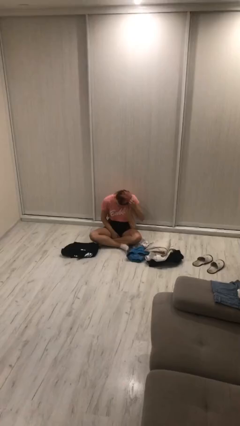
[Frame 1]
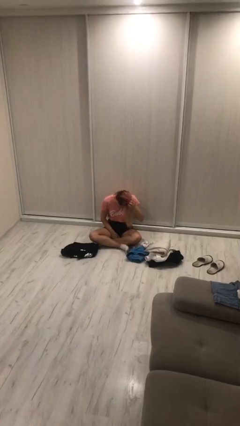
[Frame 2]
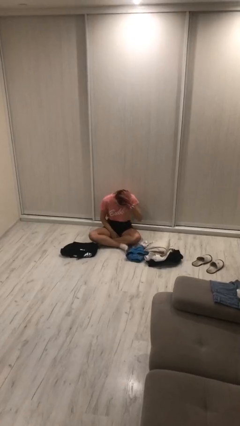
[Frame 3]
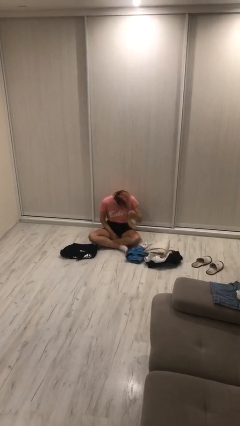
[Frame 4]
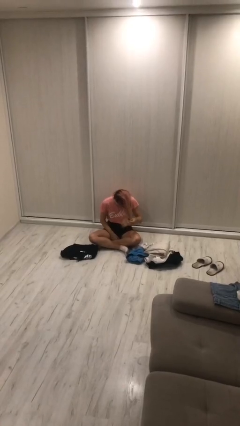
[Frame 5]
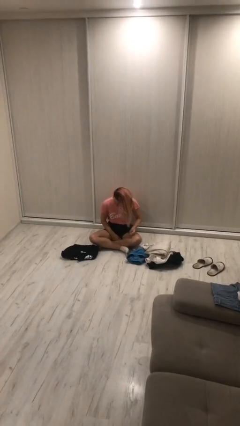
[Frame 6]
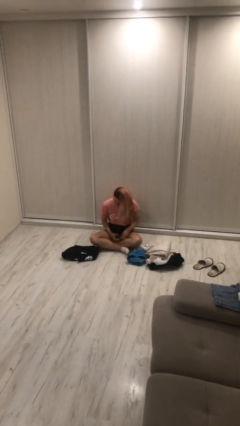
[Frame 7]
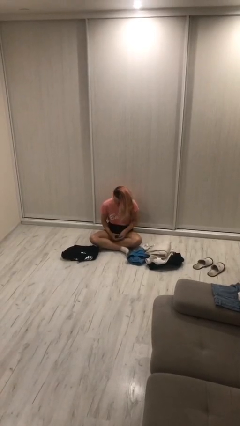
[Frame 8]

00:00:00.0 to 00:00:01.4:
person takes off hairtie

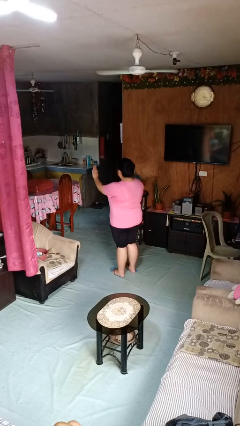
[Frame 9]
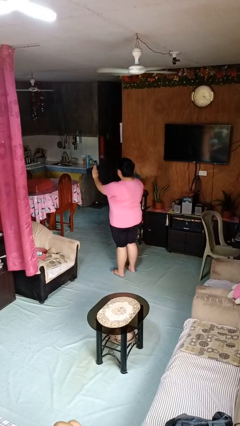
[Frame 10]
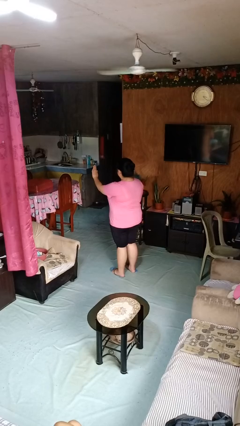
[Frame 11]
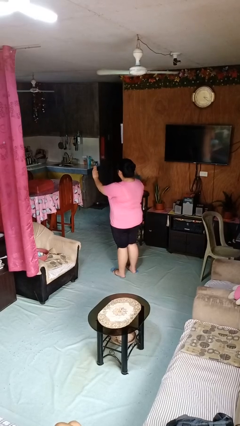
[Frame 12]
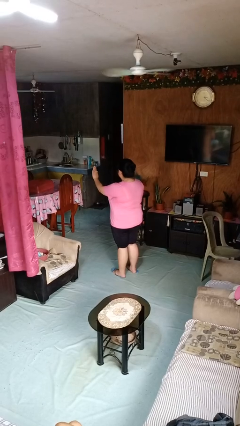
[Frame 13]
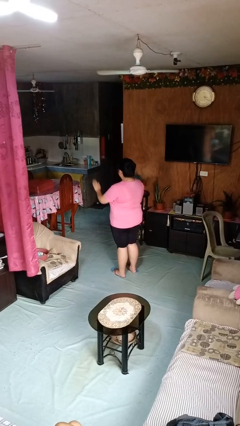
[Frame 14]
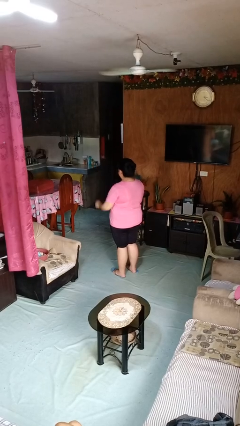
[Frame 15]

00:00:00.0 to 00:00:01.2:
person gestures stop

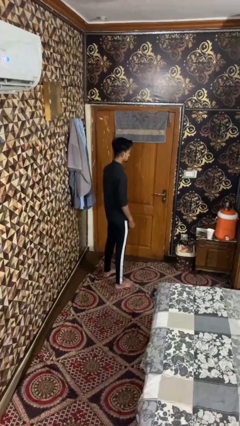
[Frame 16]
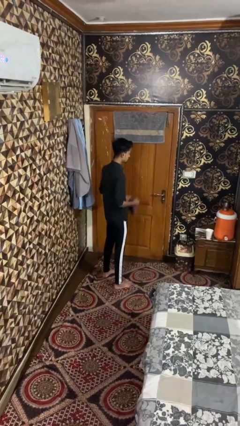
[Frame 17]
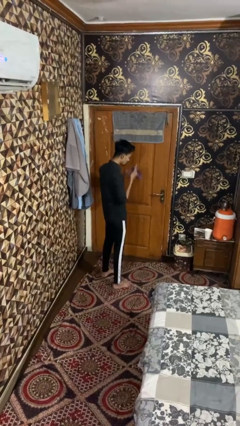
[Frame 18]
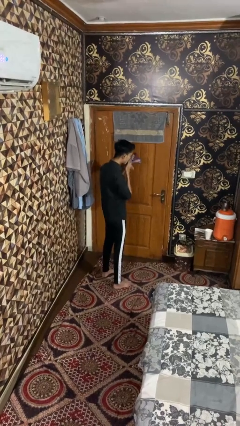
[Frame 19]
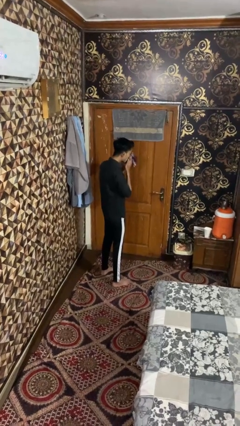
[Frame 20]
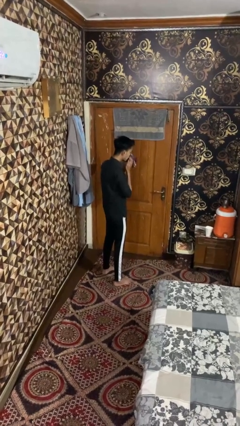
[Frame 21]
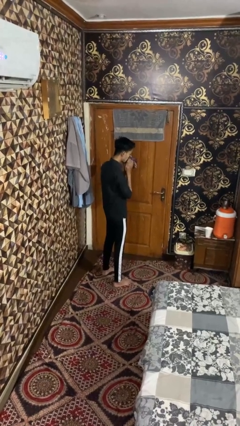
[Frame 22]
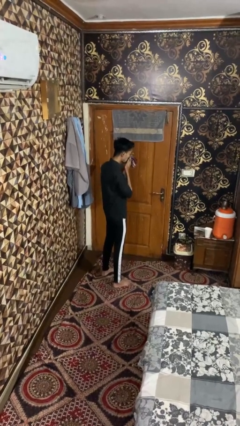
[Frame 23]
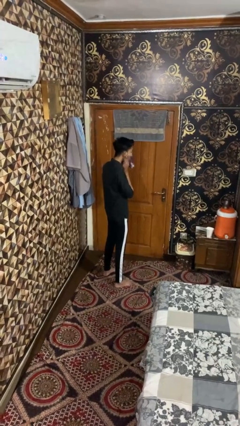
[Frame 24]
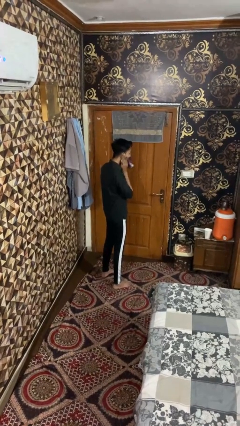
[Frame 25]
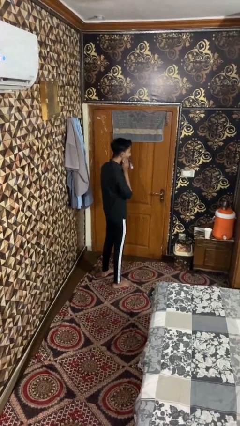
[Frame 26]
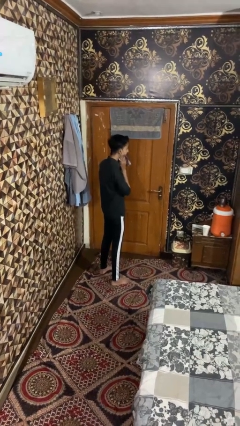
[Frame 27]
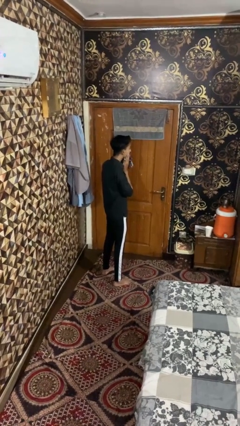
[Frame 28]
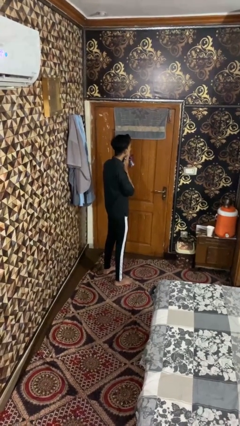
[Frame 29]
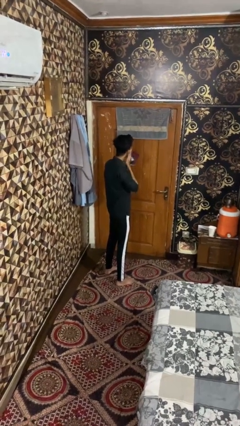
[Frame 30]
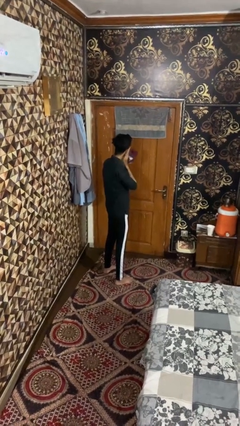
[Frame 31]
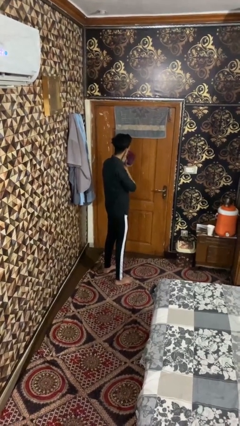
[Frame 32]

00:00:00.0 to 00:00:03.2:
person wipes mouth with napkin

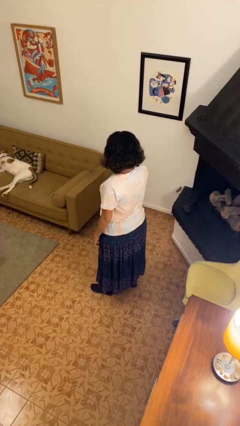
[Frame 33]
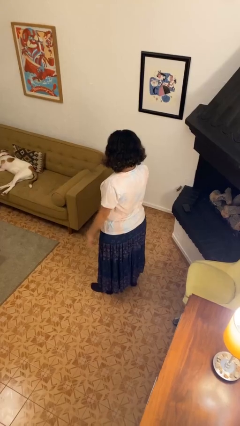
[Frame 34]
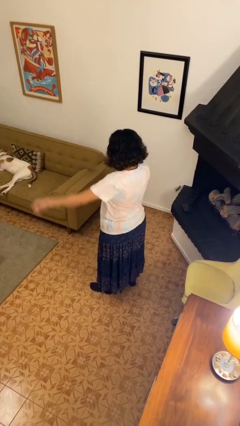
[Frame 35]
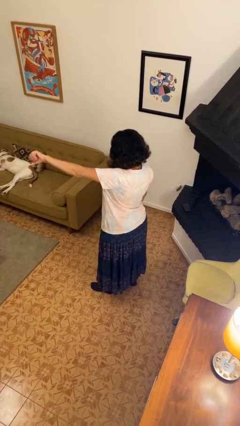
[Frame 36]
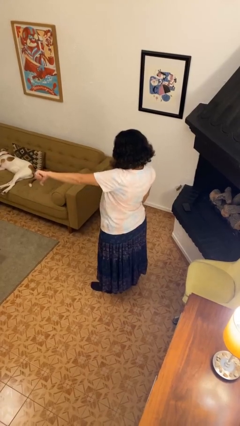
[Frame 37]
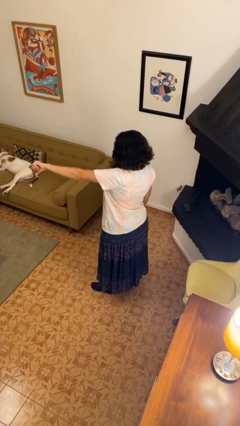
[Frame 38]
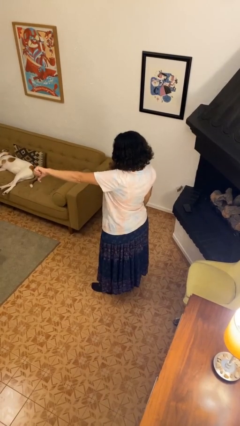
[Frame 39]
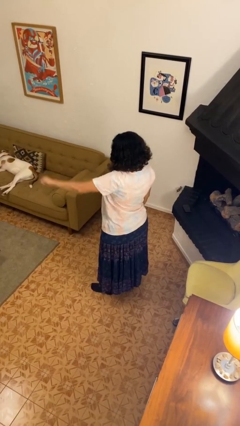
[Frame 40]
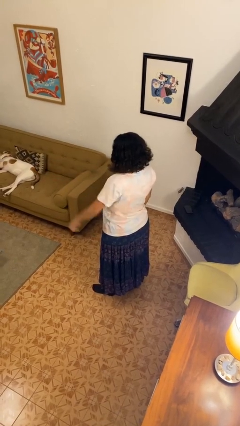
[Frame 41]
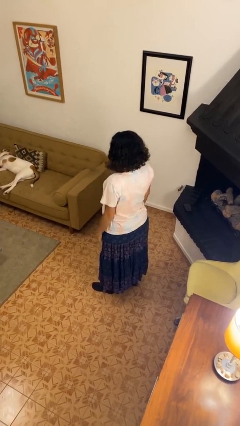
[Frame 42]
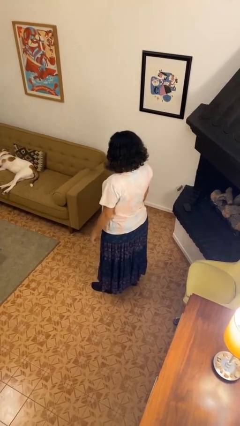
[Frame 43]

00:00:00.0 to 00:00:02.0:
person gestures thumbs down

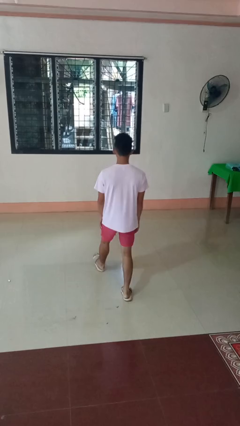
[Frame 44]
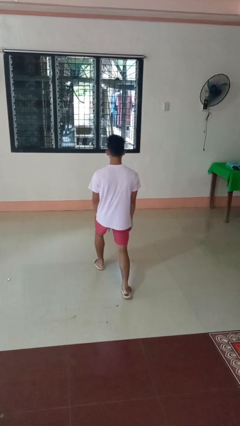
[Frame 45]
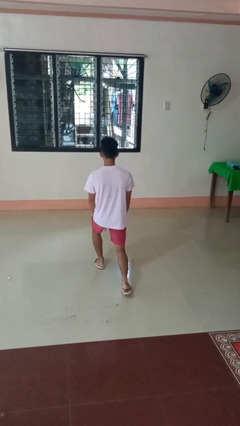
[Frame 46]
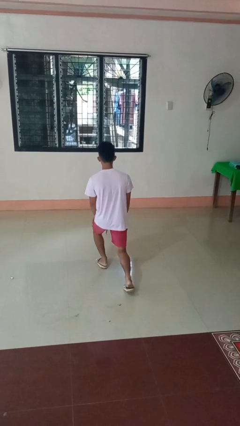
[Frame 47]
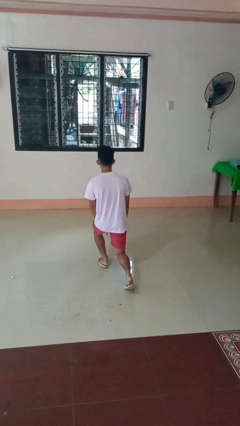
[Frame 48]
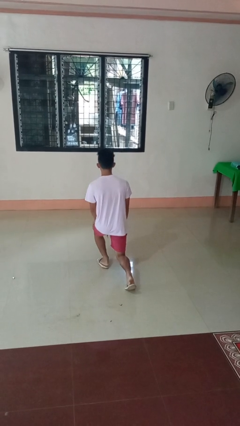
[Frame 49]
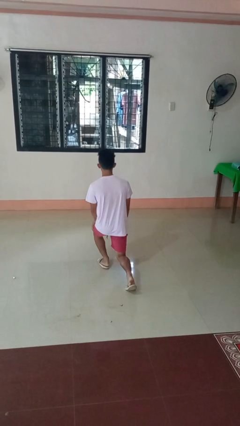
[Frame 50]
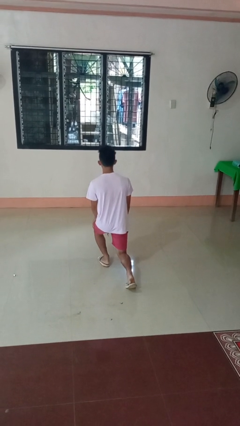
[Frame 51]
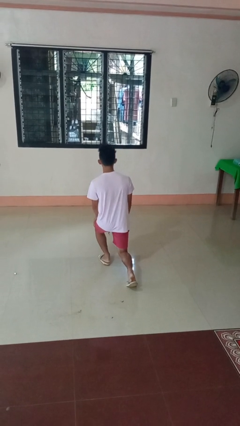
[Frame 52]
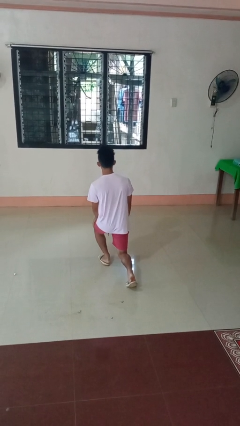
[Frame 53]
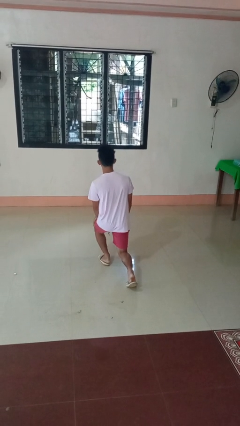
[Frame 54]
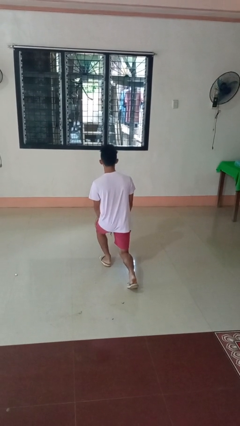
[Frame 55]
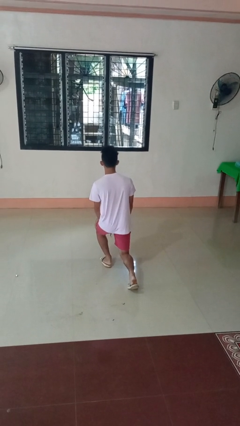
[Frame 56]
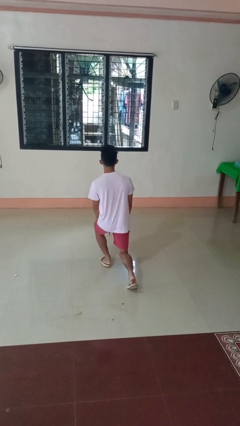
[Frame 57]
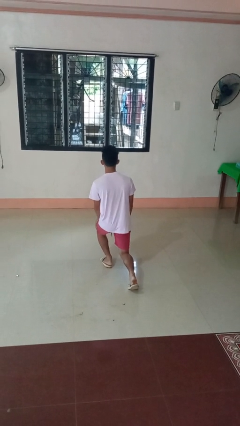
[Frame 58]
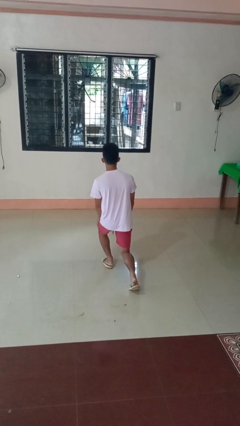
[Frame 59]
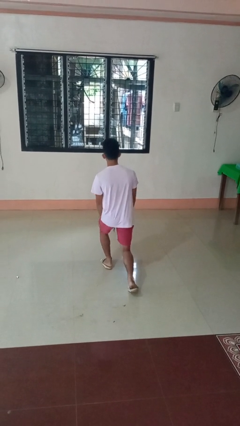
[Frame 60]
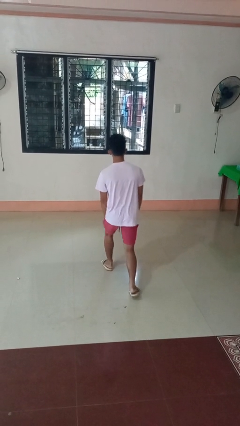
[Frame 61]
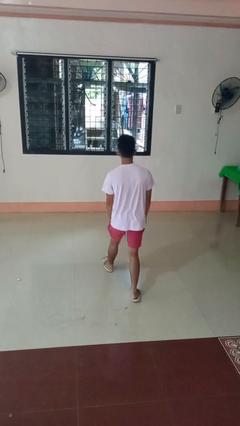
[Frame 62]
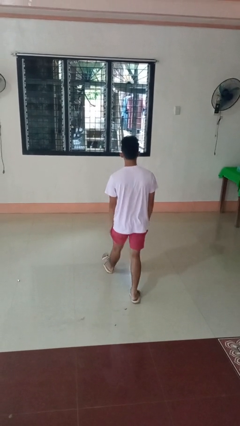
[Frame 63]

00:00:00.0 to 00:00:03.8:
person exercises with lunges

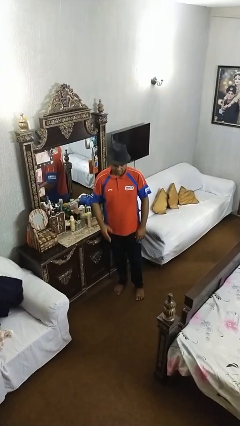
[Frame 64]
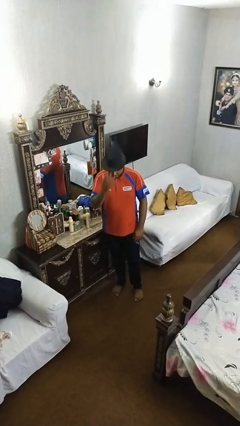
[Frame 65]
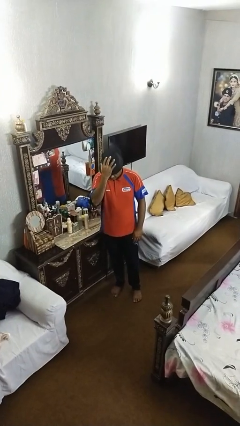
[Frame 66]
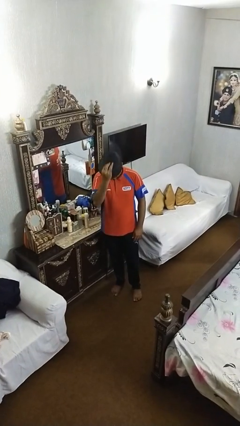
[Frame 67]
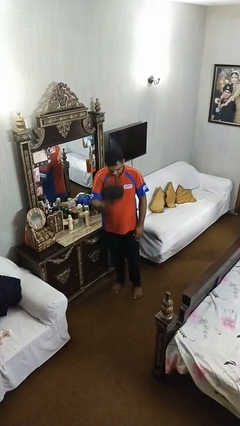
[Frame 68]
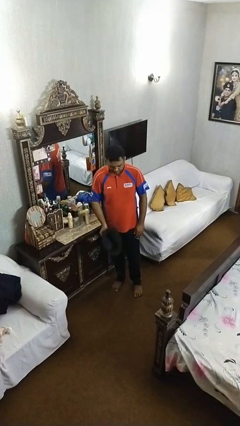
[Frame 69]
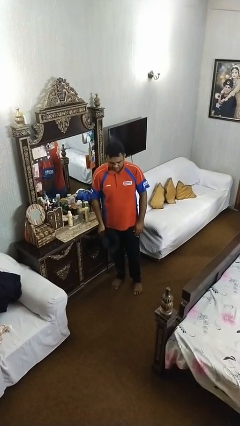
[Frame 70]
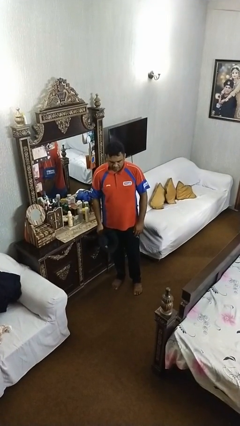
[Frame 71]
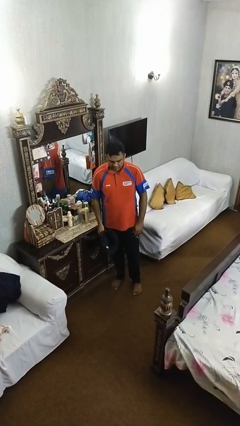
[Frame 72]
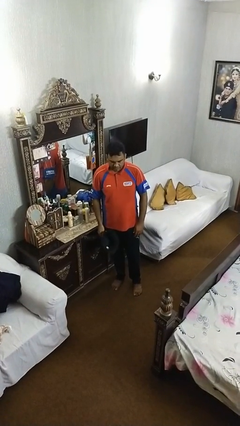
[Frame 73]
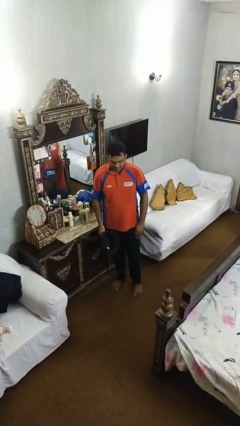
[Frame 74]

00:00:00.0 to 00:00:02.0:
person takes off hat

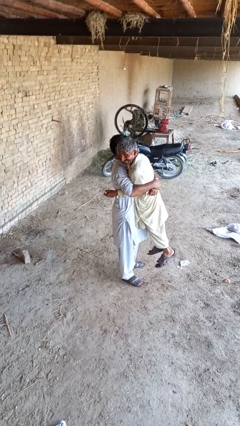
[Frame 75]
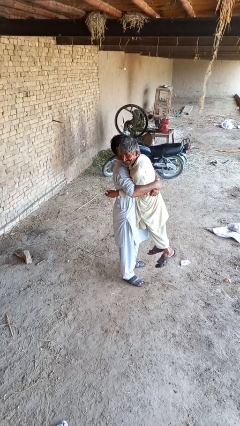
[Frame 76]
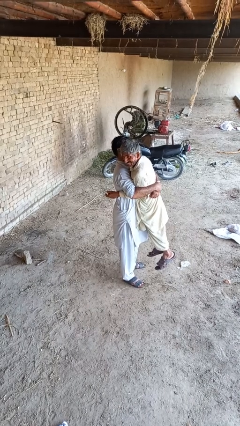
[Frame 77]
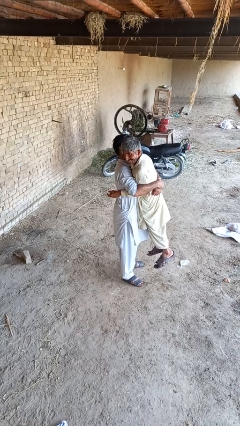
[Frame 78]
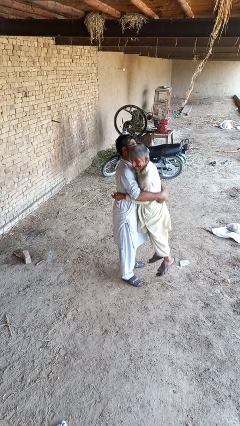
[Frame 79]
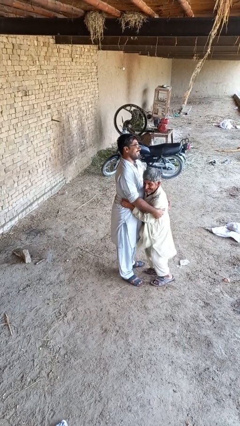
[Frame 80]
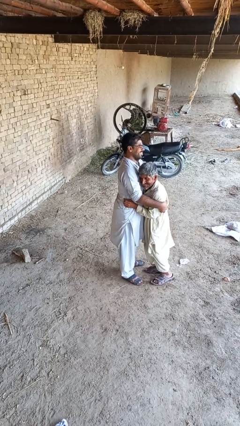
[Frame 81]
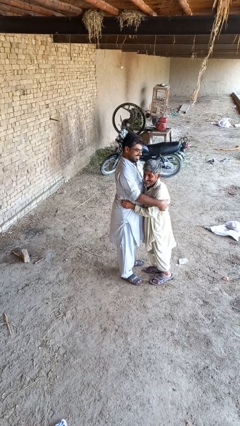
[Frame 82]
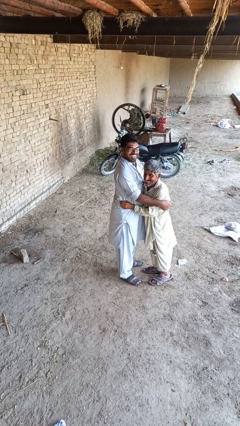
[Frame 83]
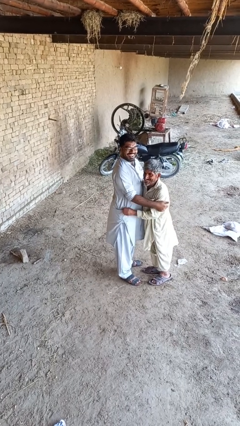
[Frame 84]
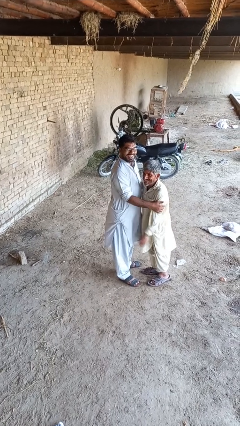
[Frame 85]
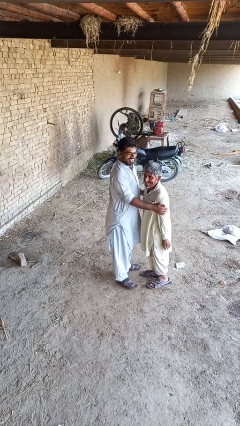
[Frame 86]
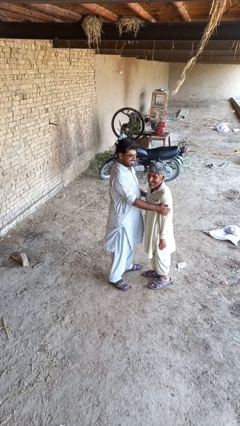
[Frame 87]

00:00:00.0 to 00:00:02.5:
person puts down person

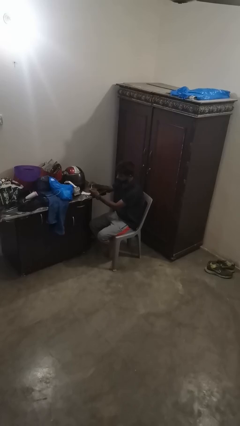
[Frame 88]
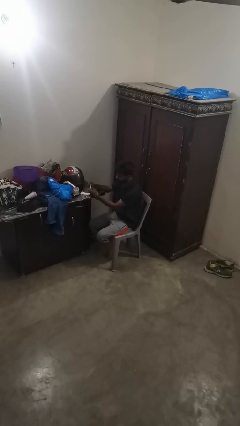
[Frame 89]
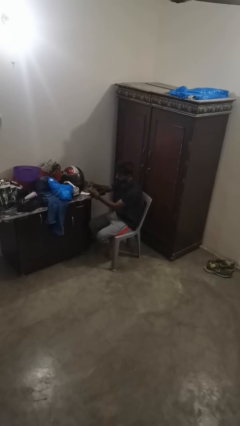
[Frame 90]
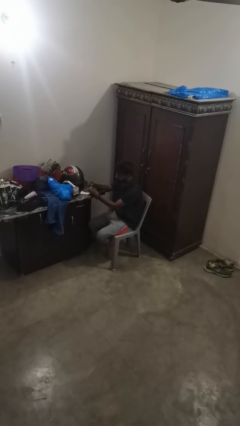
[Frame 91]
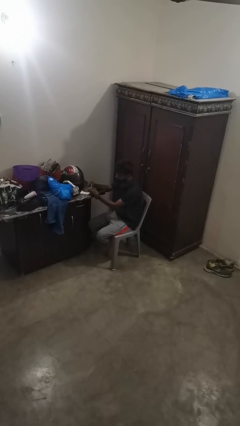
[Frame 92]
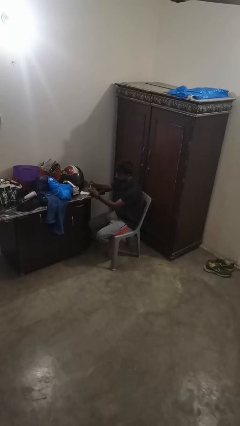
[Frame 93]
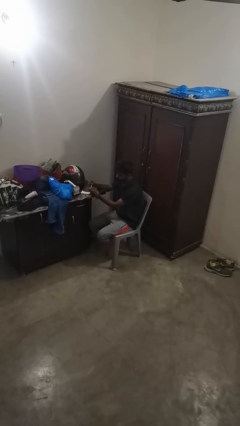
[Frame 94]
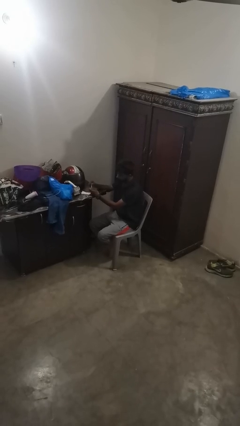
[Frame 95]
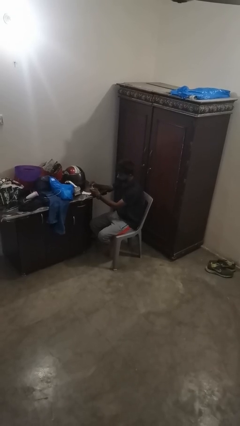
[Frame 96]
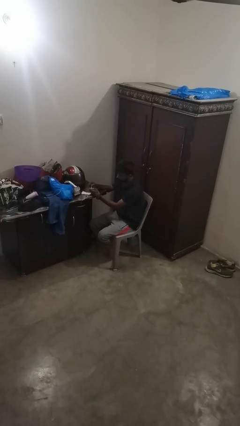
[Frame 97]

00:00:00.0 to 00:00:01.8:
person paints fingernails
